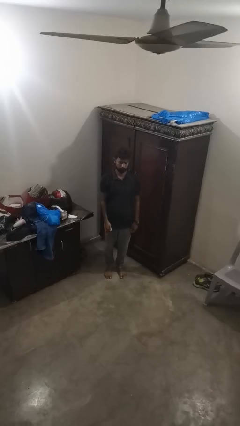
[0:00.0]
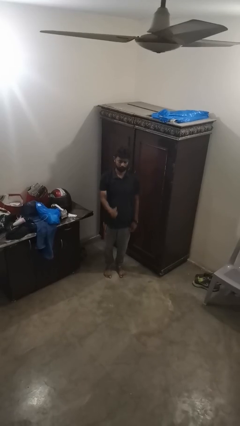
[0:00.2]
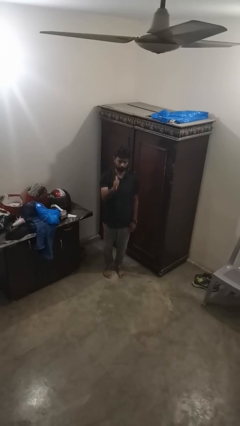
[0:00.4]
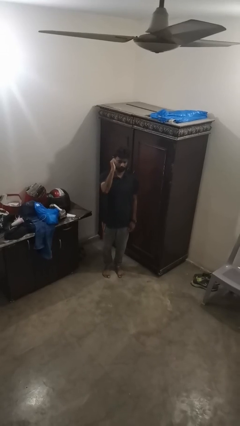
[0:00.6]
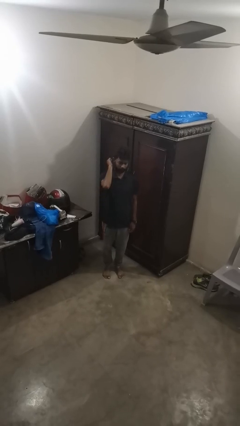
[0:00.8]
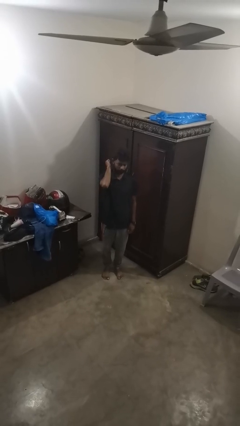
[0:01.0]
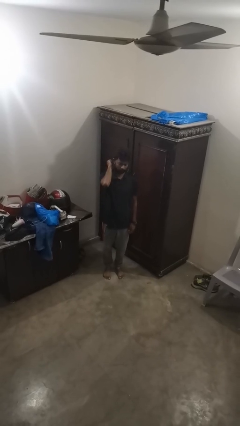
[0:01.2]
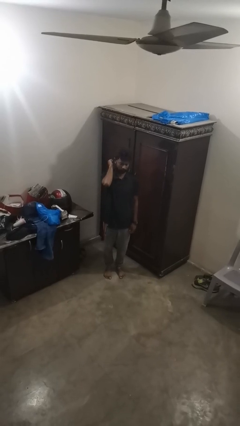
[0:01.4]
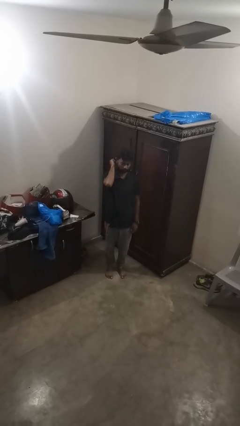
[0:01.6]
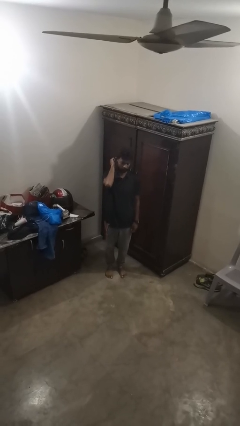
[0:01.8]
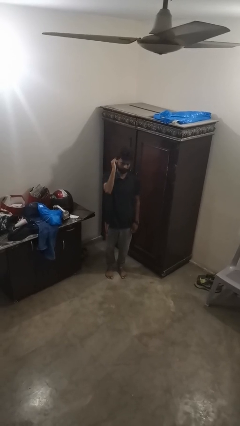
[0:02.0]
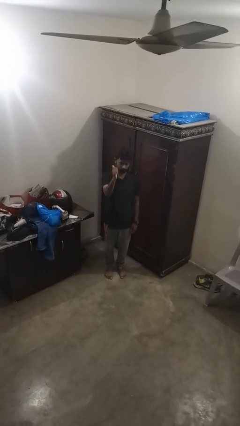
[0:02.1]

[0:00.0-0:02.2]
person gestures behind me

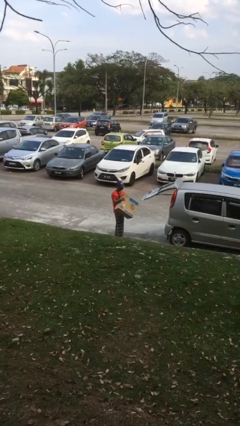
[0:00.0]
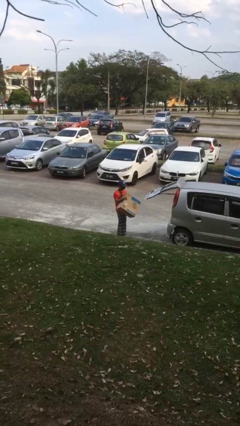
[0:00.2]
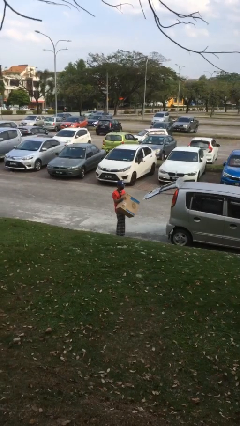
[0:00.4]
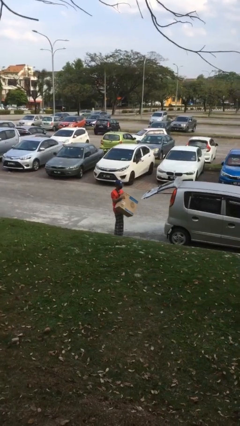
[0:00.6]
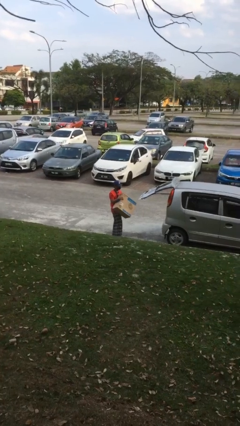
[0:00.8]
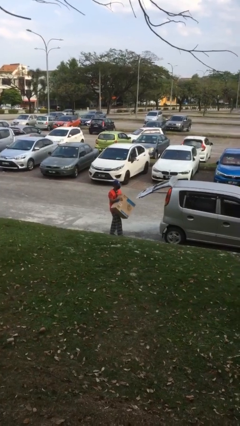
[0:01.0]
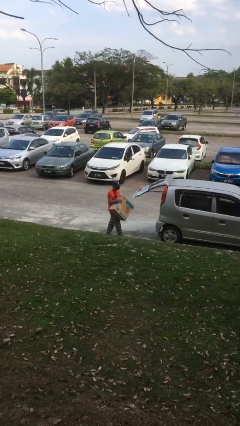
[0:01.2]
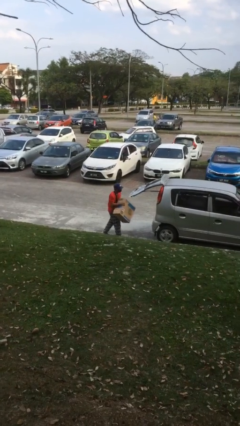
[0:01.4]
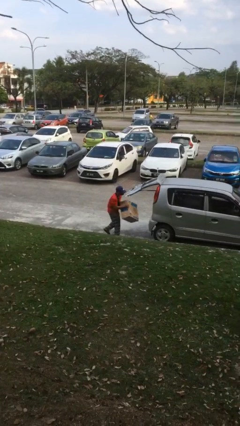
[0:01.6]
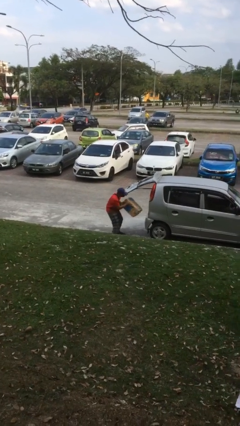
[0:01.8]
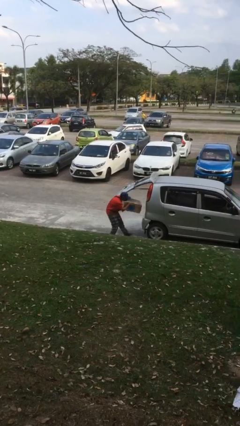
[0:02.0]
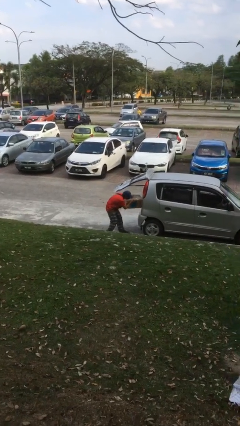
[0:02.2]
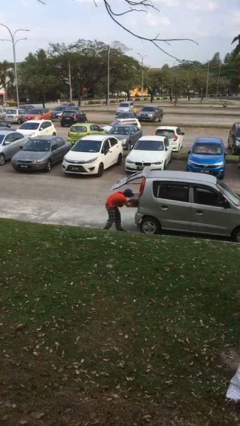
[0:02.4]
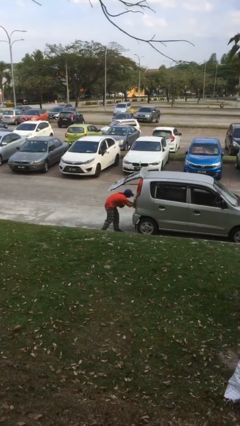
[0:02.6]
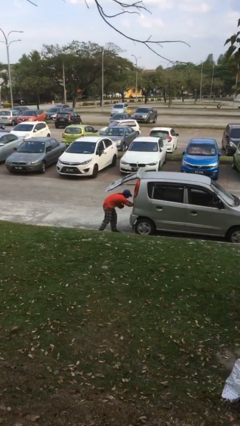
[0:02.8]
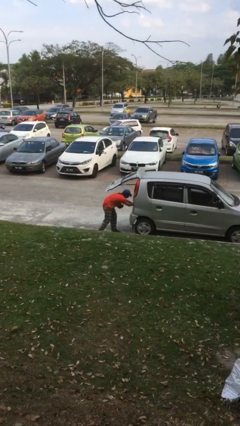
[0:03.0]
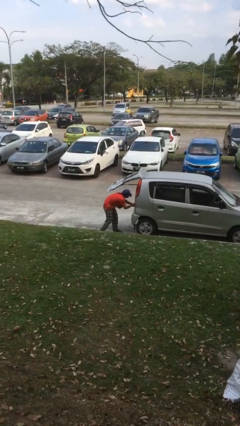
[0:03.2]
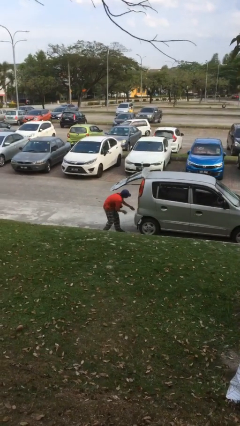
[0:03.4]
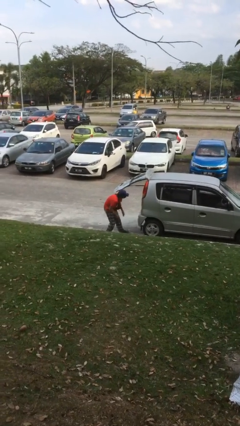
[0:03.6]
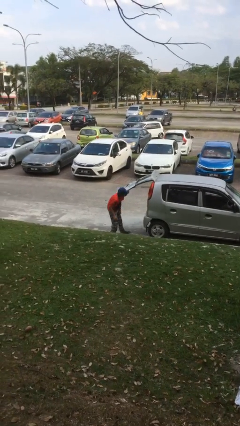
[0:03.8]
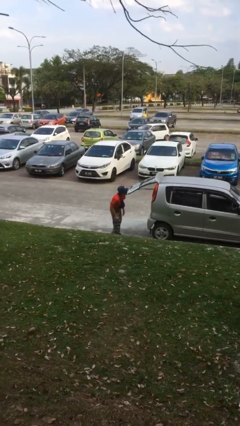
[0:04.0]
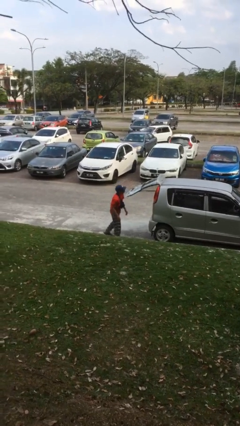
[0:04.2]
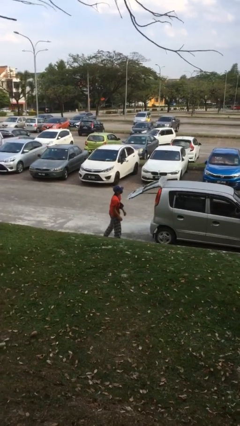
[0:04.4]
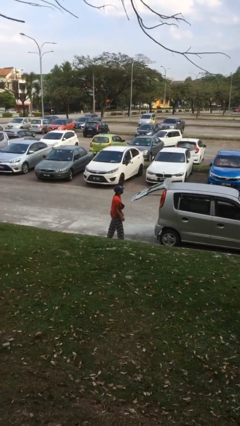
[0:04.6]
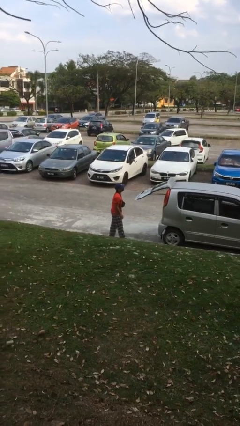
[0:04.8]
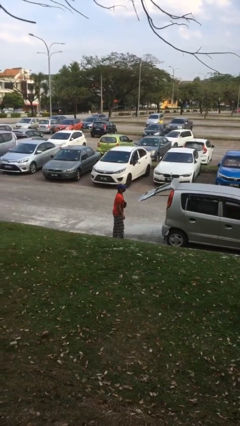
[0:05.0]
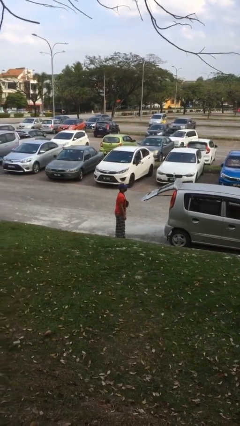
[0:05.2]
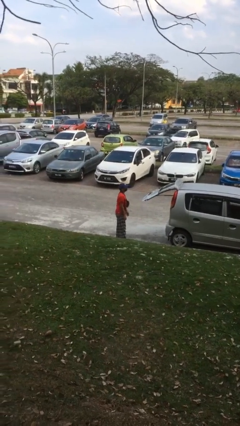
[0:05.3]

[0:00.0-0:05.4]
person loads car

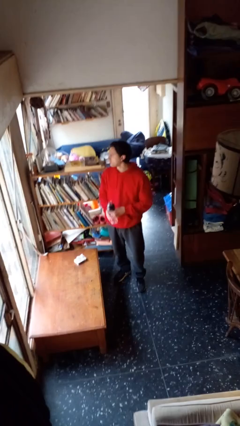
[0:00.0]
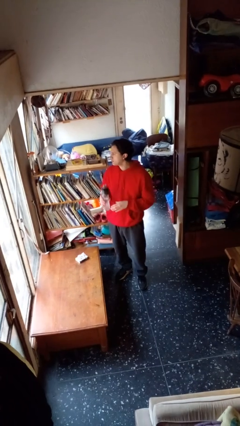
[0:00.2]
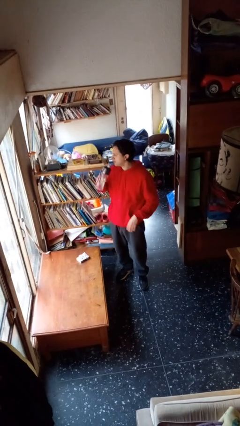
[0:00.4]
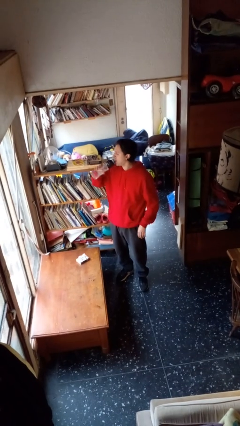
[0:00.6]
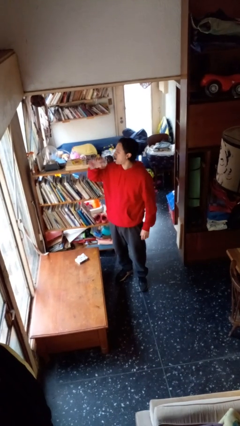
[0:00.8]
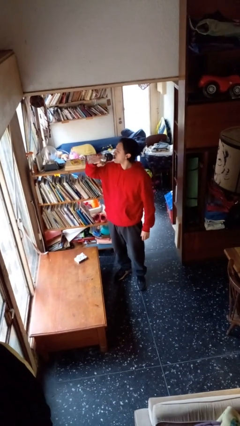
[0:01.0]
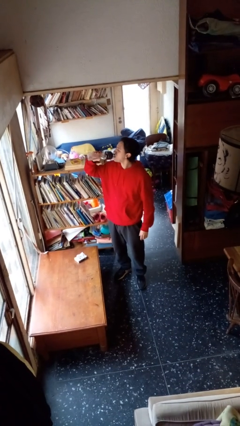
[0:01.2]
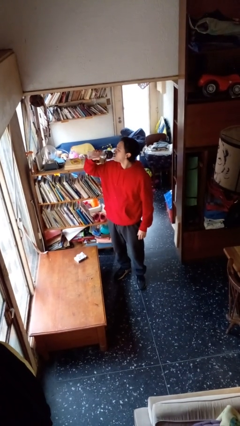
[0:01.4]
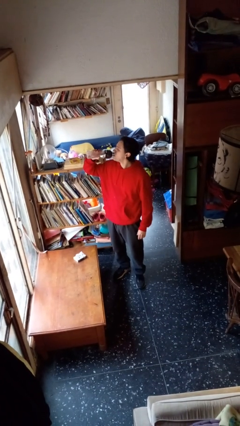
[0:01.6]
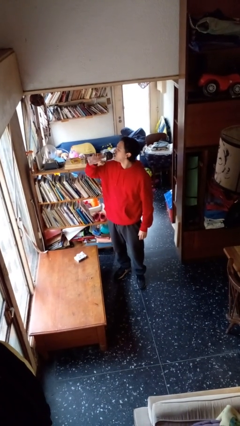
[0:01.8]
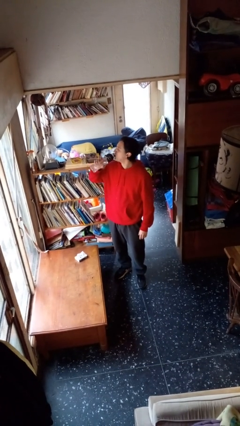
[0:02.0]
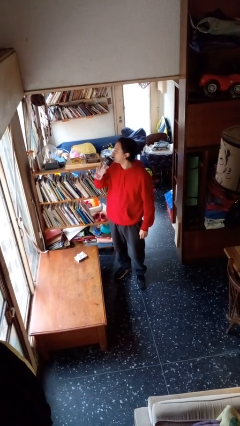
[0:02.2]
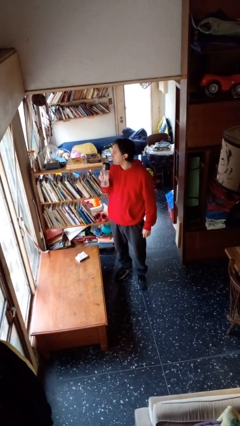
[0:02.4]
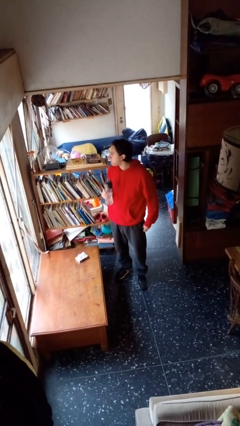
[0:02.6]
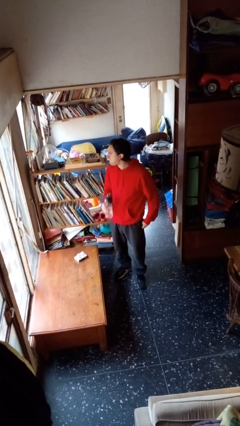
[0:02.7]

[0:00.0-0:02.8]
person drinks from bottle

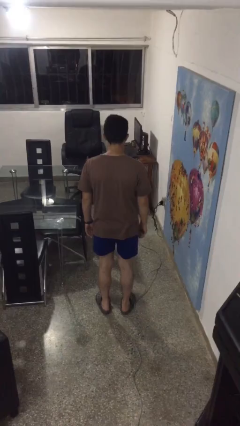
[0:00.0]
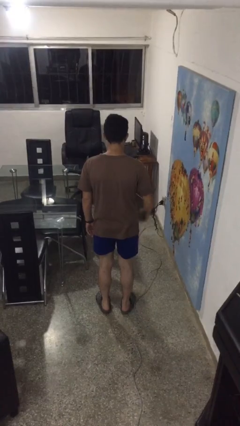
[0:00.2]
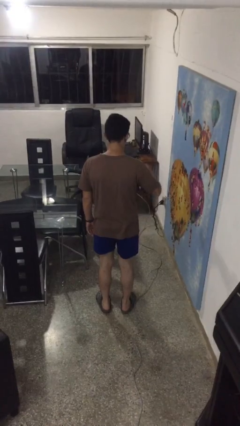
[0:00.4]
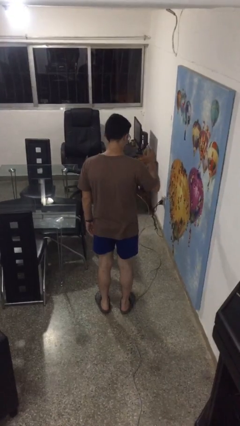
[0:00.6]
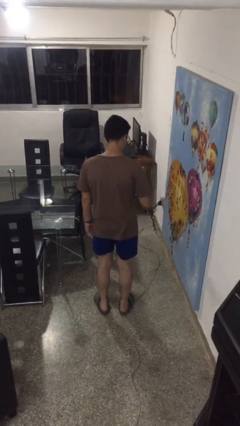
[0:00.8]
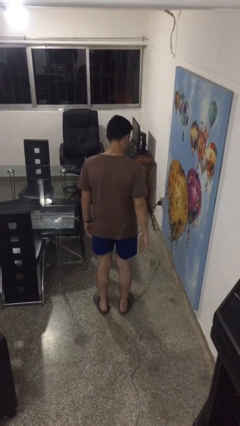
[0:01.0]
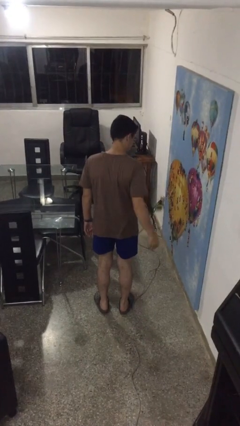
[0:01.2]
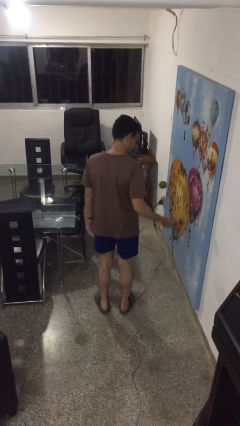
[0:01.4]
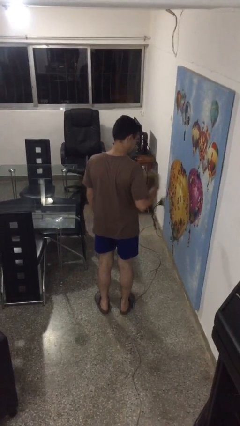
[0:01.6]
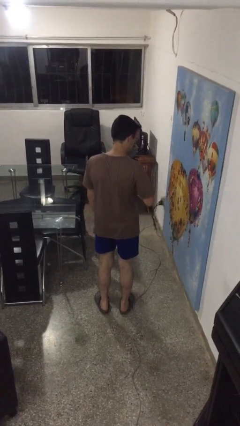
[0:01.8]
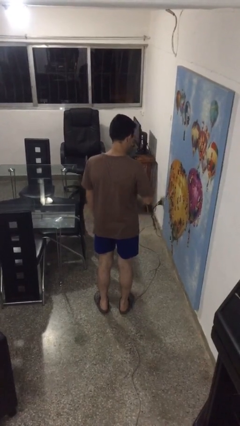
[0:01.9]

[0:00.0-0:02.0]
person bounces ball on floor

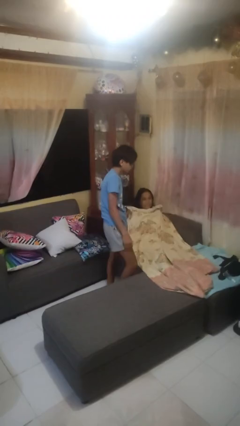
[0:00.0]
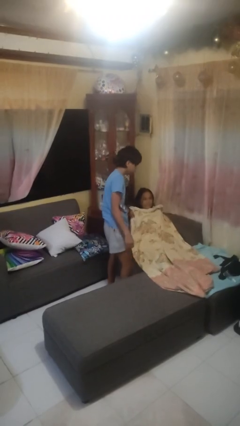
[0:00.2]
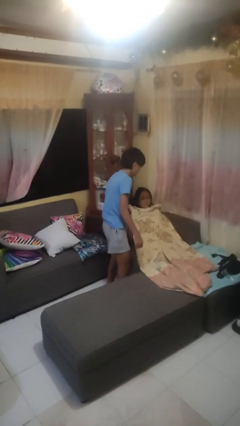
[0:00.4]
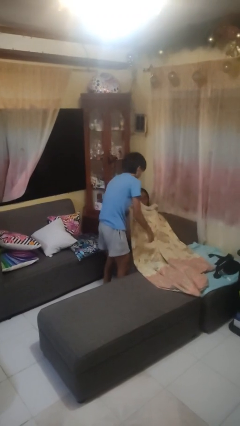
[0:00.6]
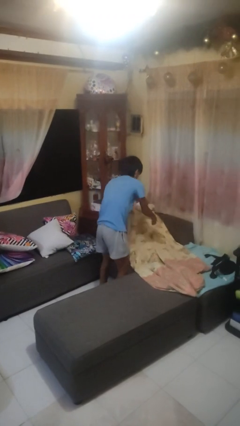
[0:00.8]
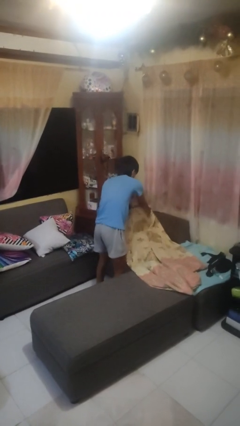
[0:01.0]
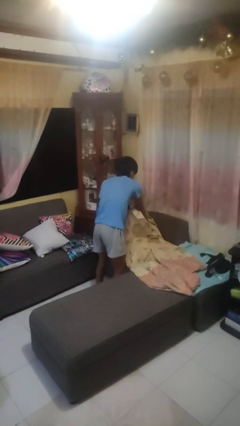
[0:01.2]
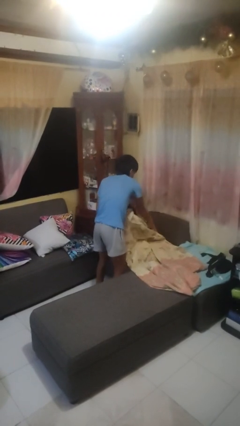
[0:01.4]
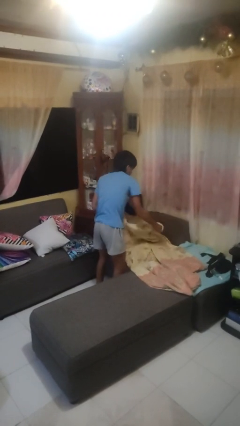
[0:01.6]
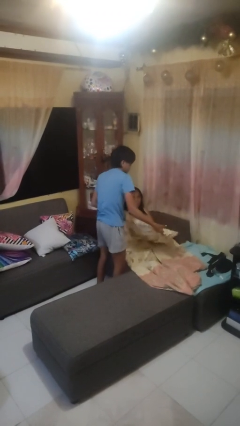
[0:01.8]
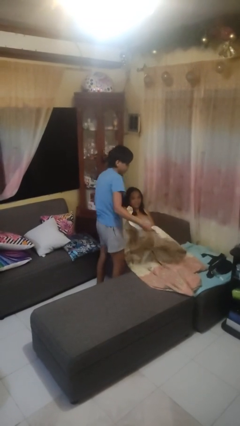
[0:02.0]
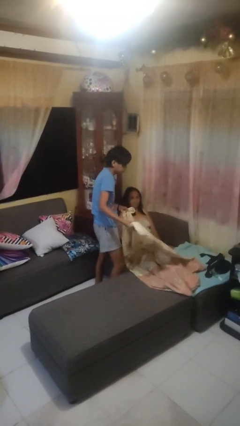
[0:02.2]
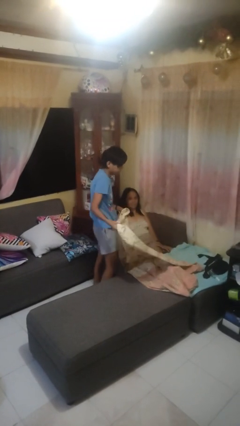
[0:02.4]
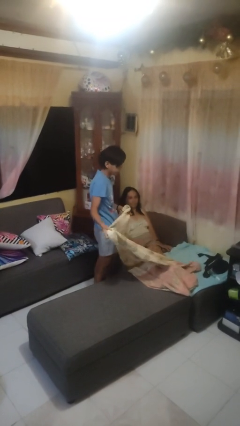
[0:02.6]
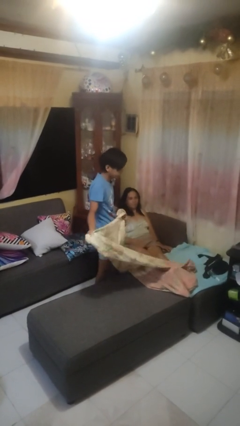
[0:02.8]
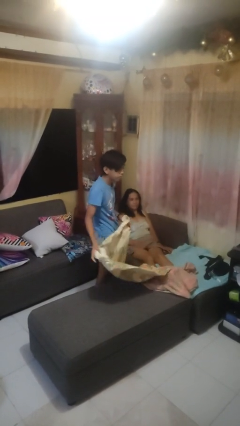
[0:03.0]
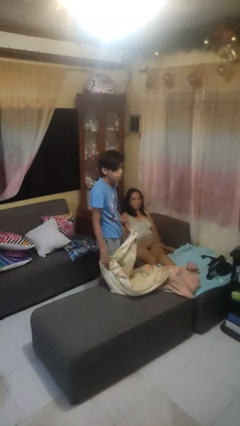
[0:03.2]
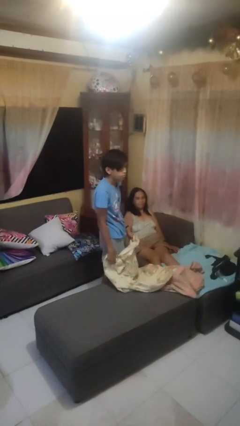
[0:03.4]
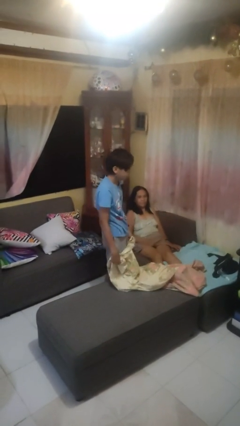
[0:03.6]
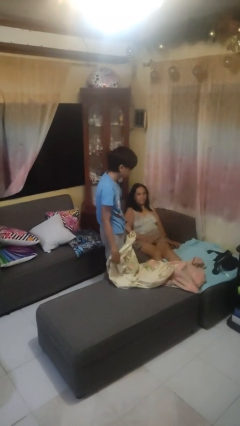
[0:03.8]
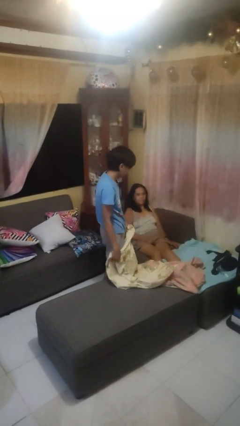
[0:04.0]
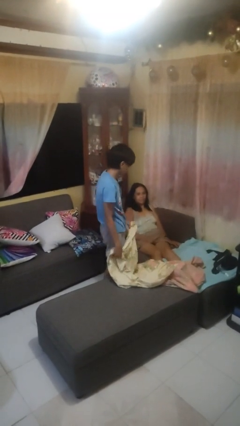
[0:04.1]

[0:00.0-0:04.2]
person uncovers friend with blanket

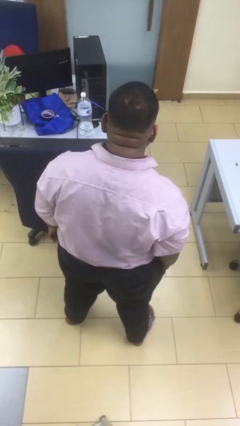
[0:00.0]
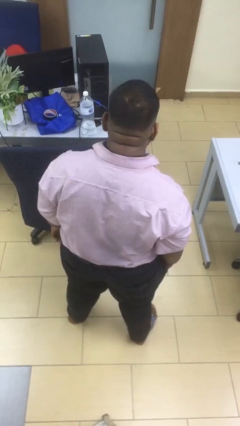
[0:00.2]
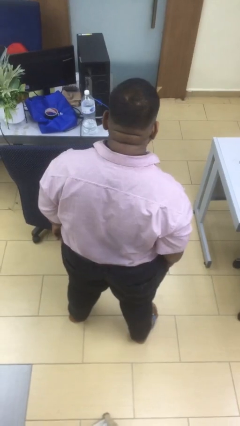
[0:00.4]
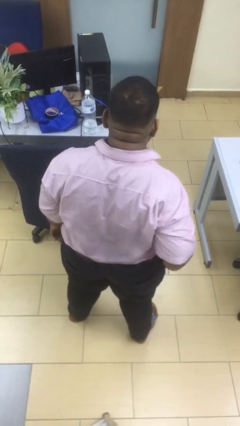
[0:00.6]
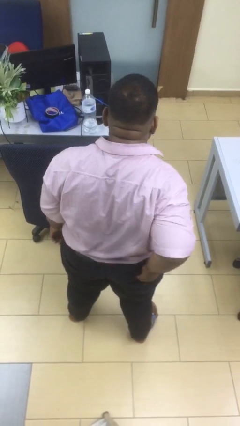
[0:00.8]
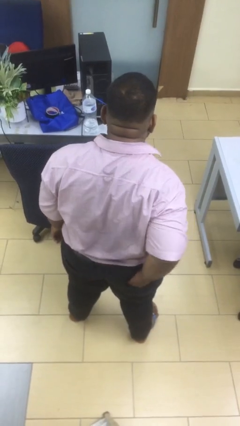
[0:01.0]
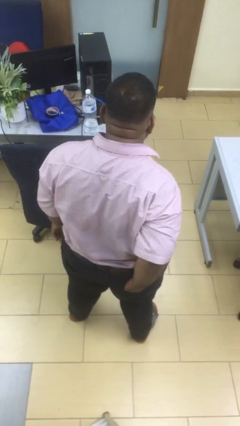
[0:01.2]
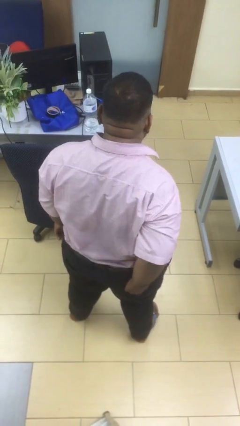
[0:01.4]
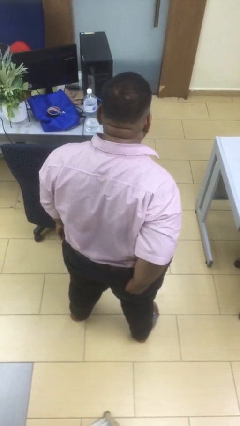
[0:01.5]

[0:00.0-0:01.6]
person puts hands in back pockets
